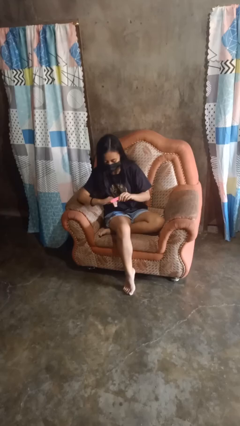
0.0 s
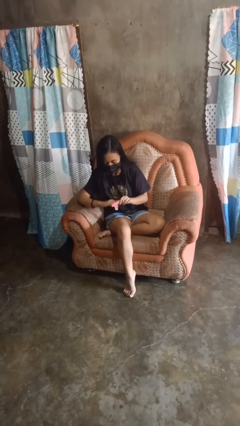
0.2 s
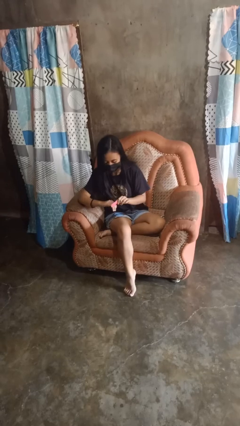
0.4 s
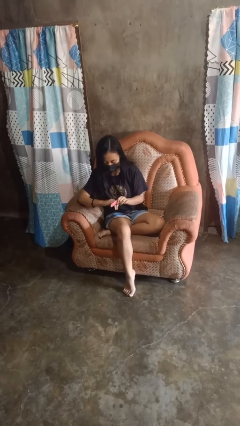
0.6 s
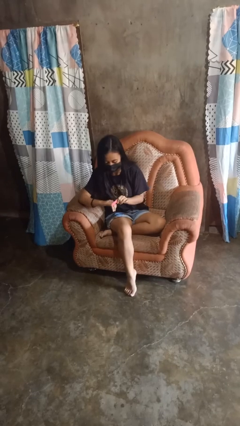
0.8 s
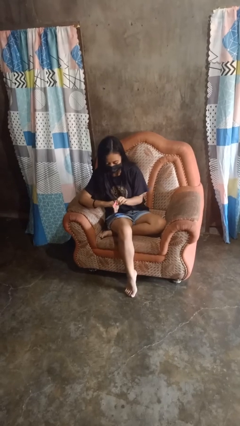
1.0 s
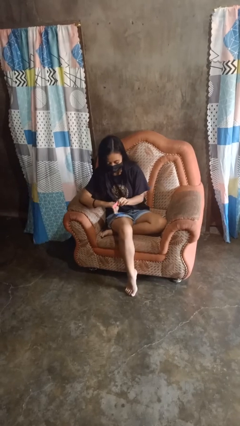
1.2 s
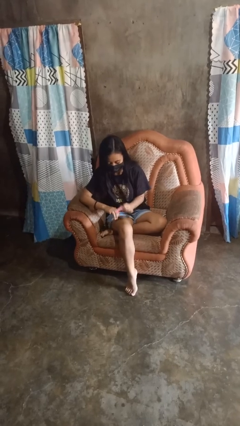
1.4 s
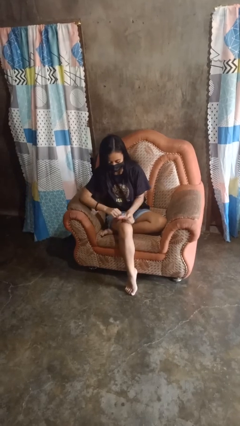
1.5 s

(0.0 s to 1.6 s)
person files fingernails

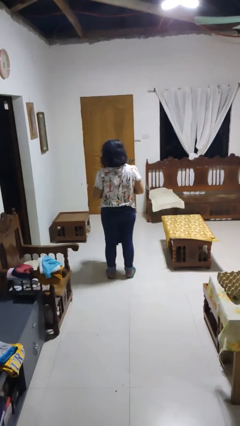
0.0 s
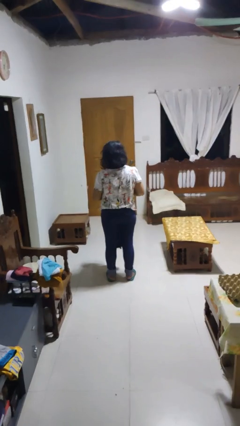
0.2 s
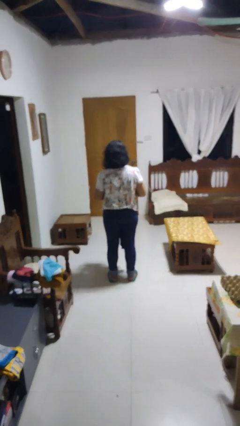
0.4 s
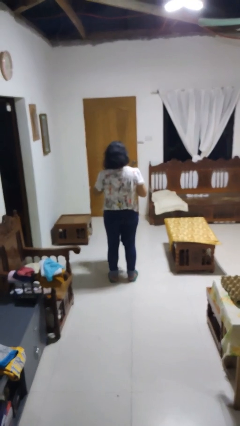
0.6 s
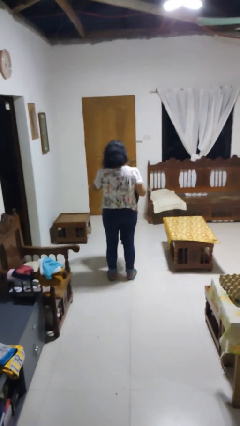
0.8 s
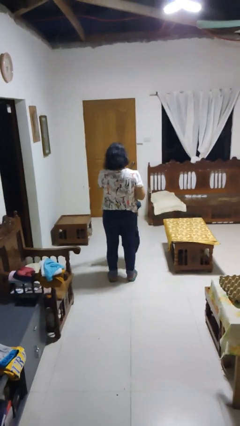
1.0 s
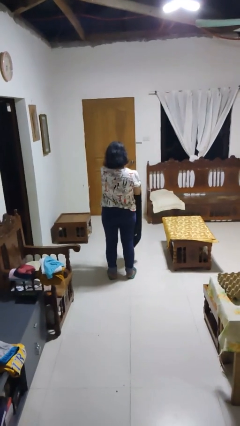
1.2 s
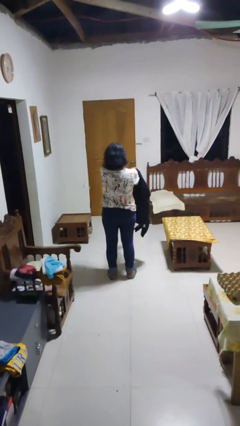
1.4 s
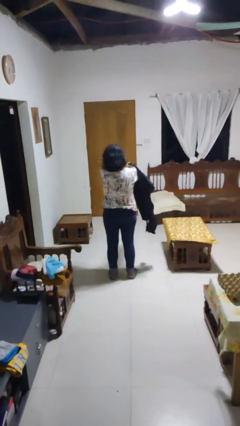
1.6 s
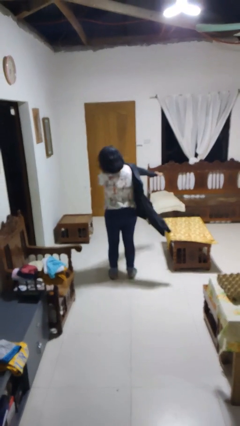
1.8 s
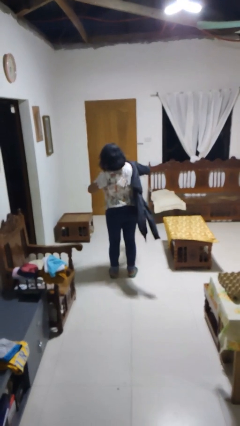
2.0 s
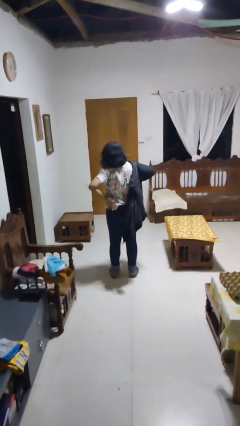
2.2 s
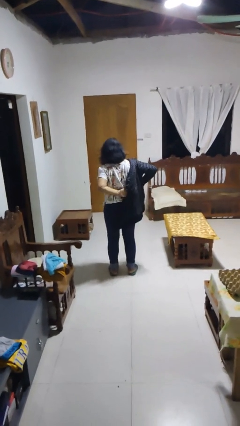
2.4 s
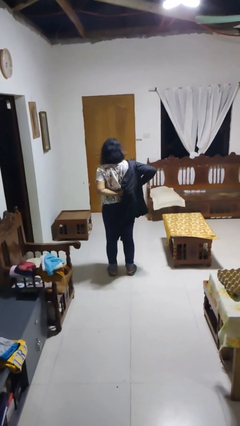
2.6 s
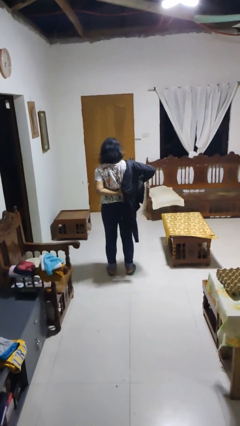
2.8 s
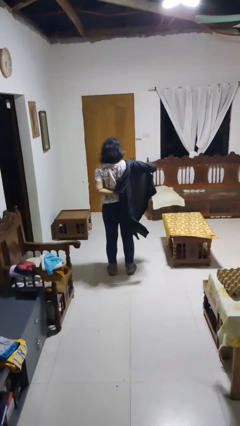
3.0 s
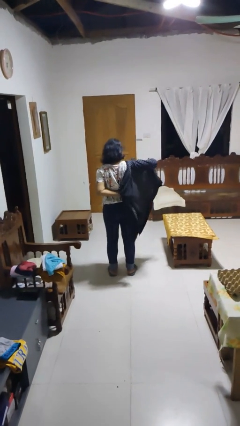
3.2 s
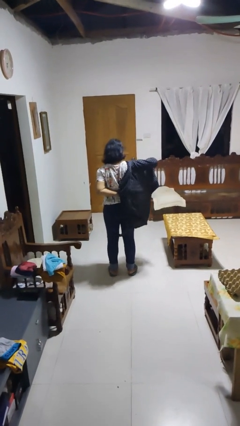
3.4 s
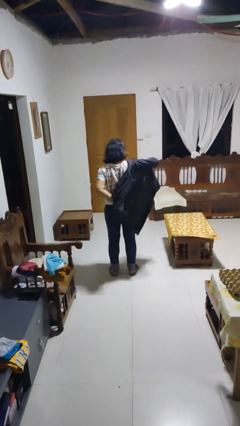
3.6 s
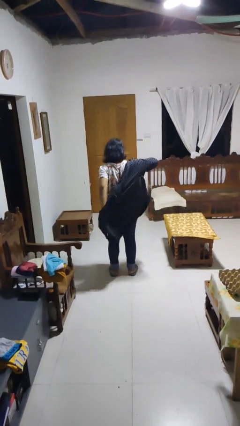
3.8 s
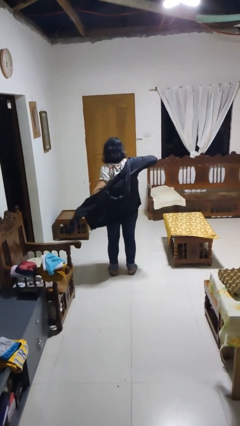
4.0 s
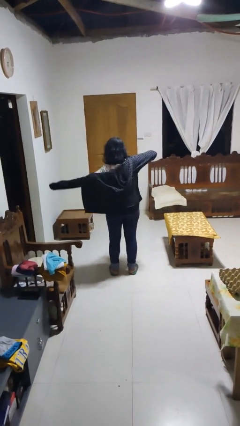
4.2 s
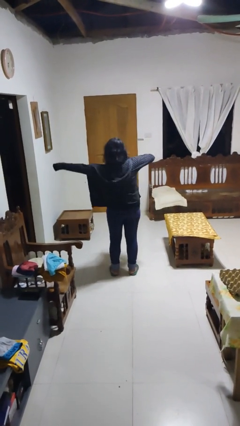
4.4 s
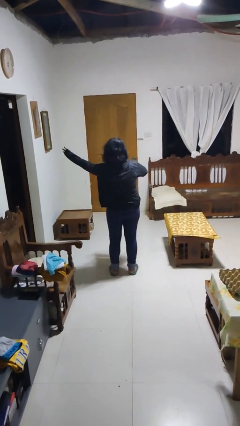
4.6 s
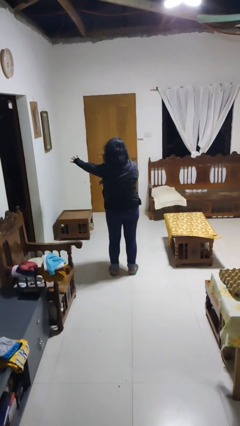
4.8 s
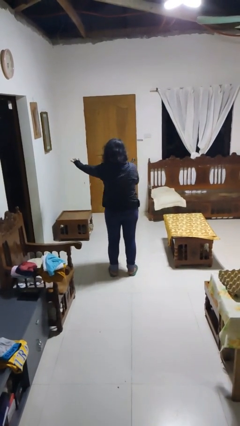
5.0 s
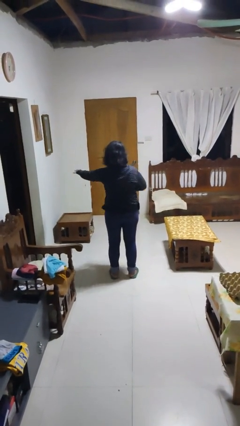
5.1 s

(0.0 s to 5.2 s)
person puts on jacket

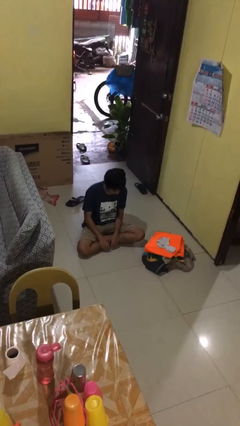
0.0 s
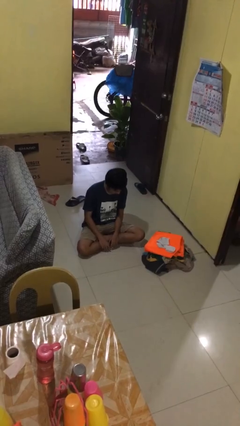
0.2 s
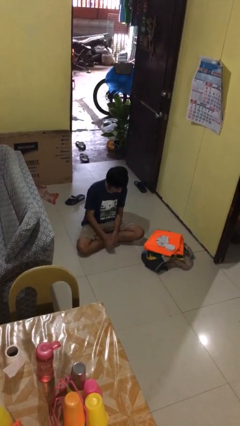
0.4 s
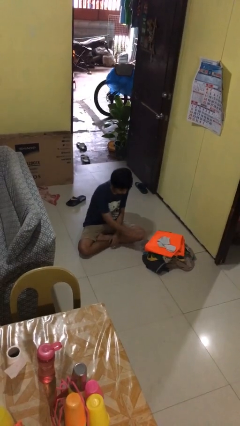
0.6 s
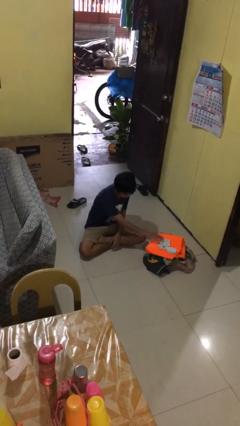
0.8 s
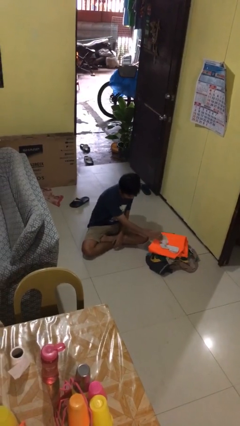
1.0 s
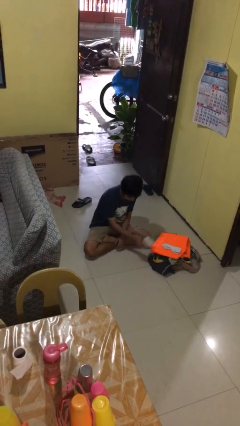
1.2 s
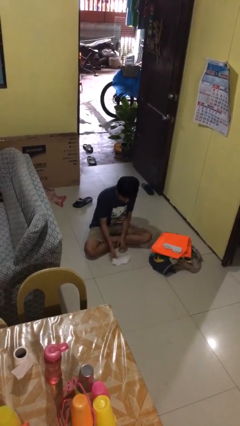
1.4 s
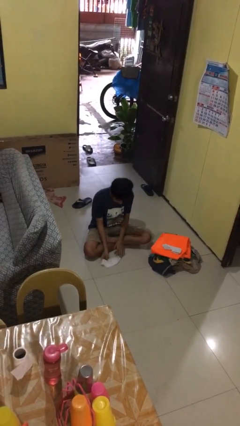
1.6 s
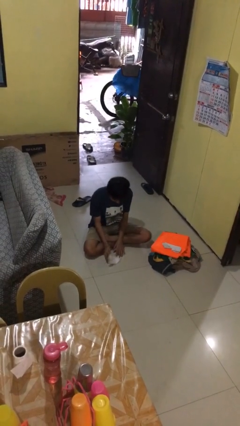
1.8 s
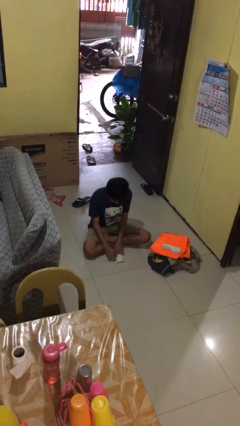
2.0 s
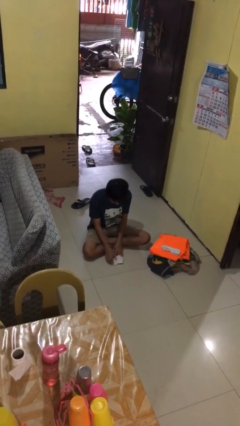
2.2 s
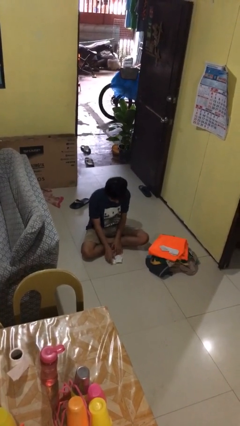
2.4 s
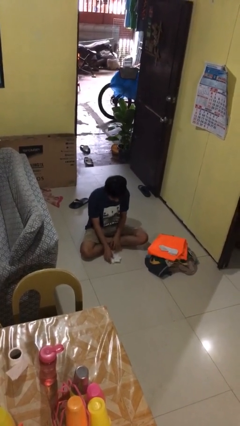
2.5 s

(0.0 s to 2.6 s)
person folds socks

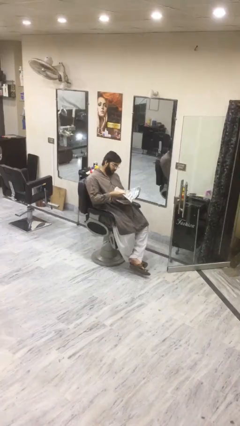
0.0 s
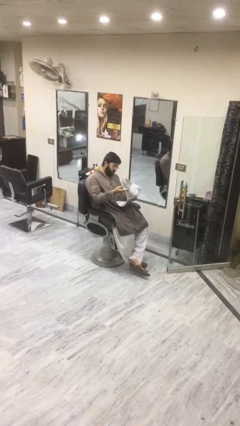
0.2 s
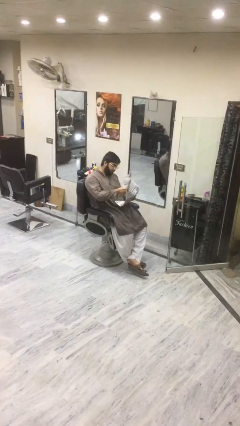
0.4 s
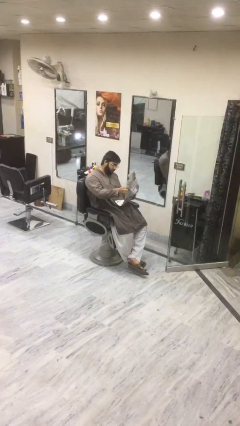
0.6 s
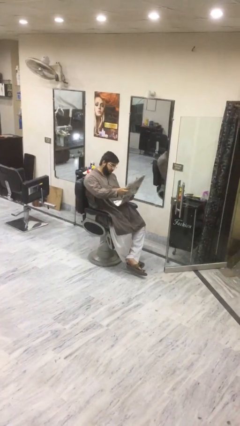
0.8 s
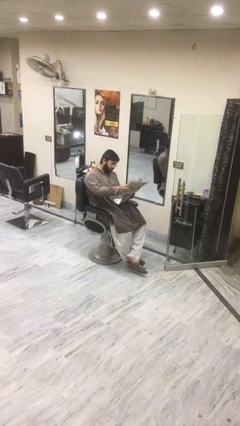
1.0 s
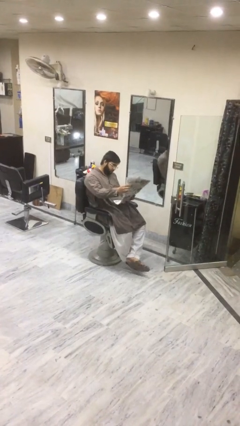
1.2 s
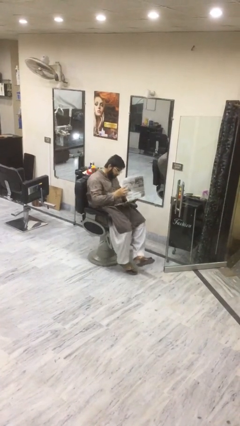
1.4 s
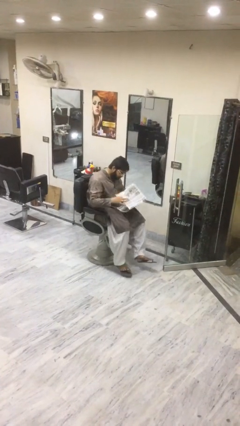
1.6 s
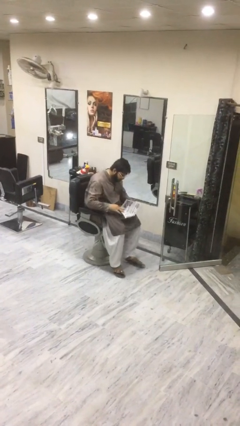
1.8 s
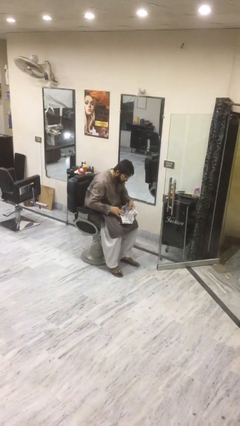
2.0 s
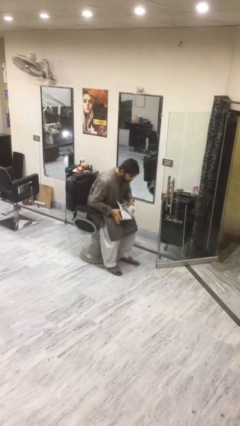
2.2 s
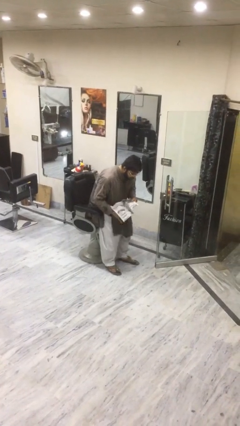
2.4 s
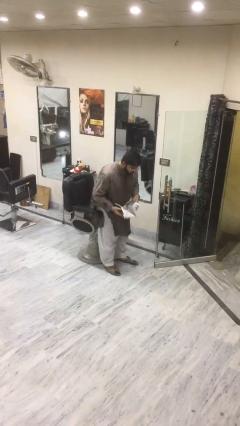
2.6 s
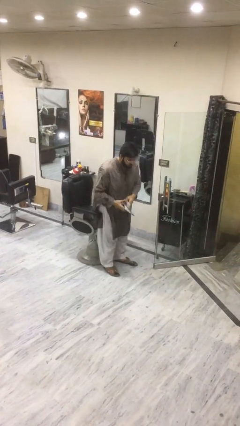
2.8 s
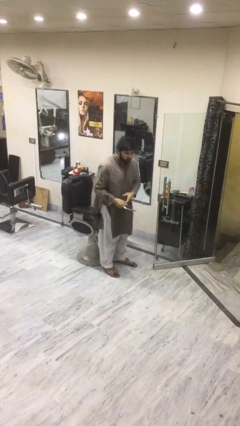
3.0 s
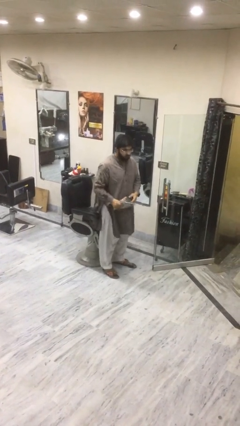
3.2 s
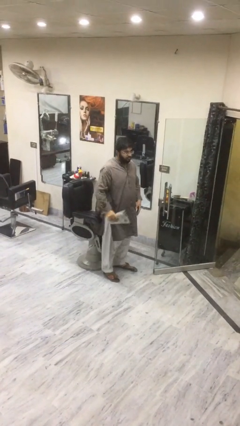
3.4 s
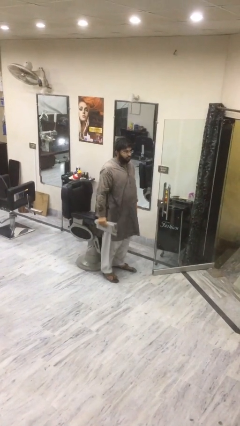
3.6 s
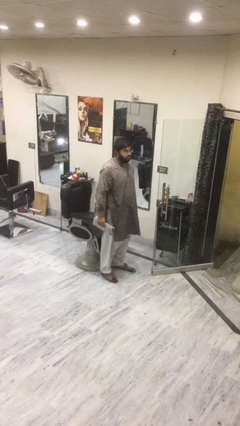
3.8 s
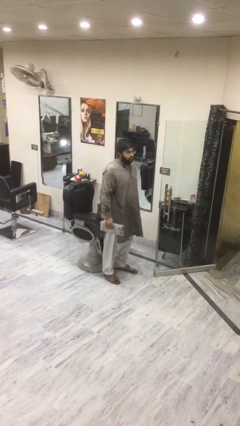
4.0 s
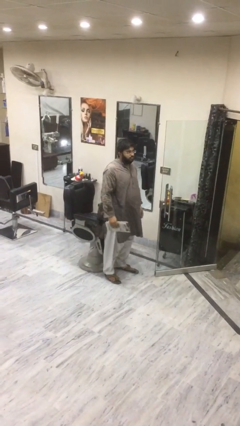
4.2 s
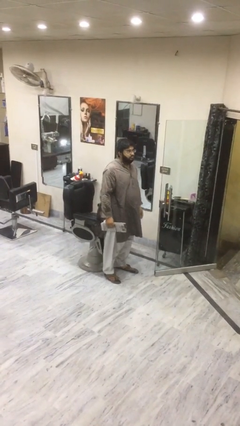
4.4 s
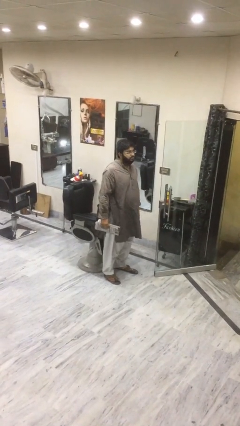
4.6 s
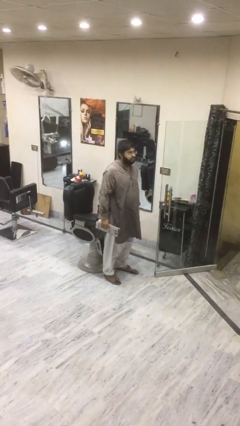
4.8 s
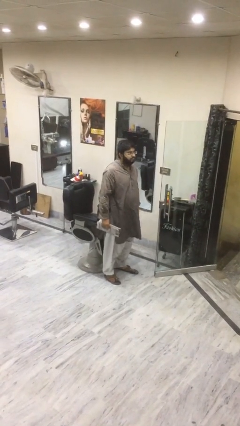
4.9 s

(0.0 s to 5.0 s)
person stands up

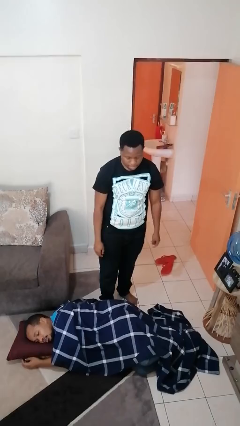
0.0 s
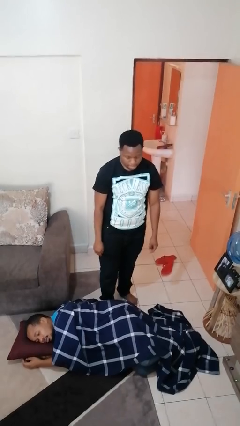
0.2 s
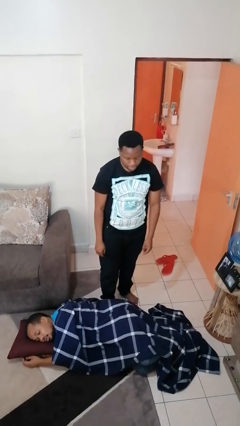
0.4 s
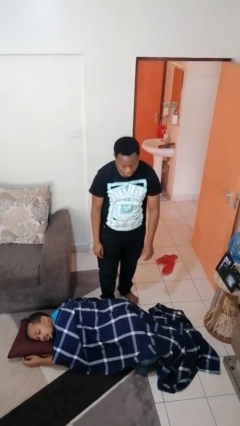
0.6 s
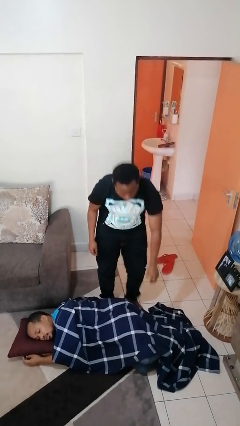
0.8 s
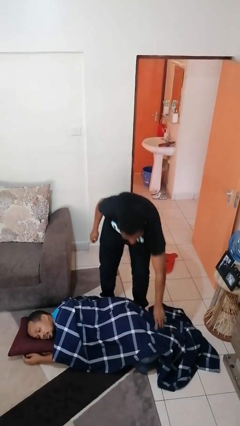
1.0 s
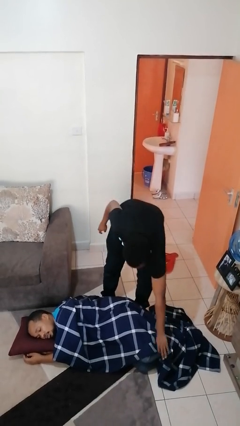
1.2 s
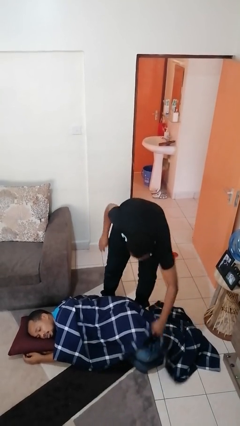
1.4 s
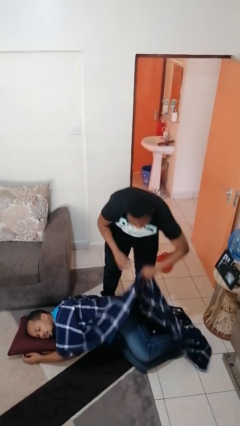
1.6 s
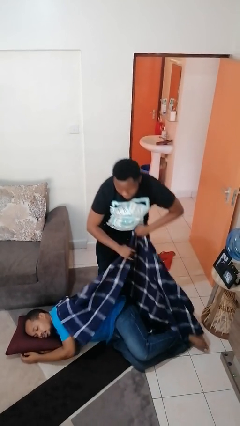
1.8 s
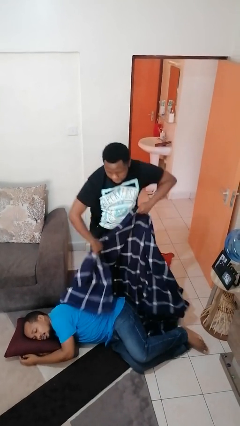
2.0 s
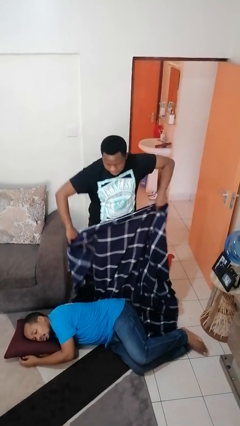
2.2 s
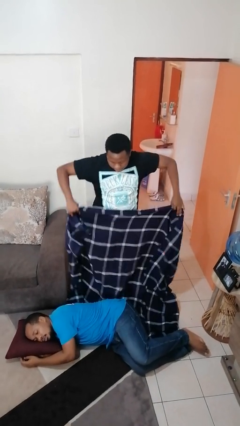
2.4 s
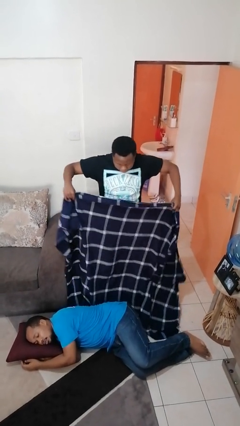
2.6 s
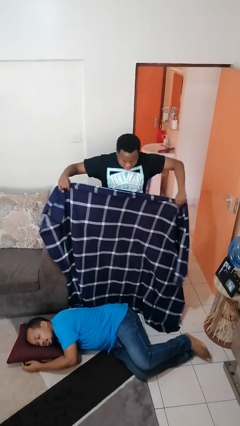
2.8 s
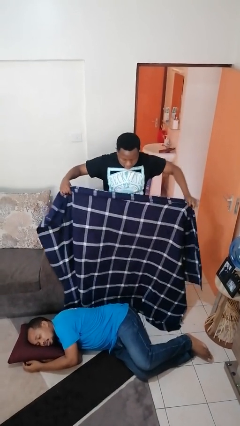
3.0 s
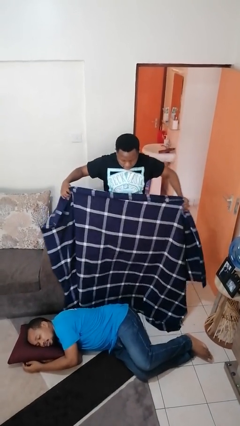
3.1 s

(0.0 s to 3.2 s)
person uncovers friend with blanket
